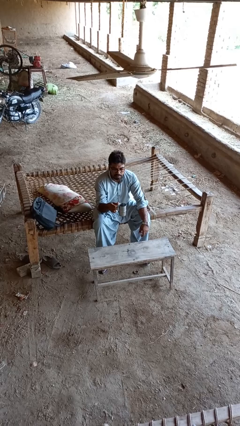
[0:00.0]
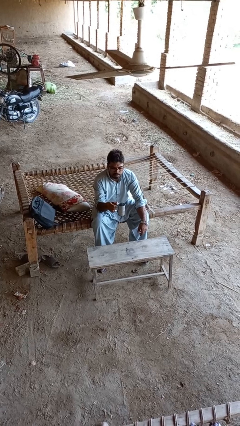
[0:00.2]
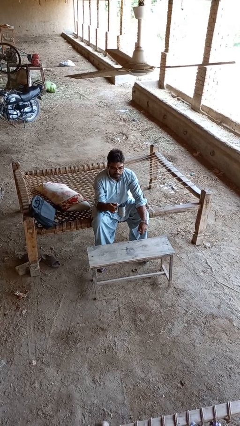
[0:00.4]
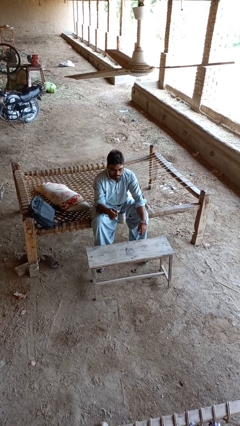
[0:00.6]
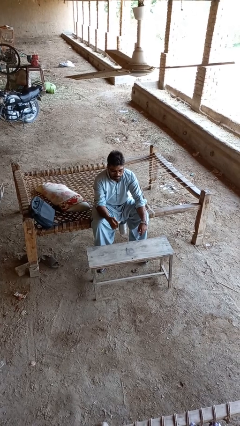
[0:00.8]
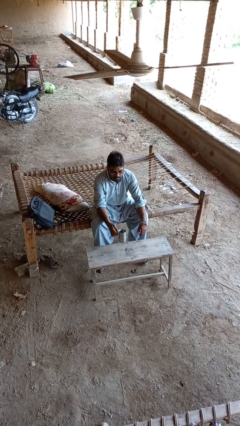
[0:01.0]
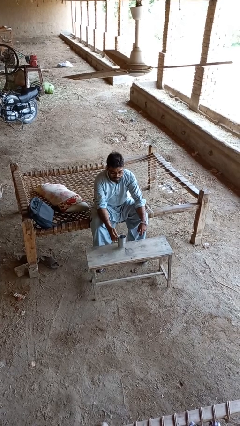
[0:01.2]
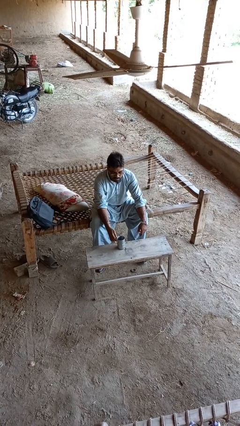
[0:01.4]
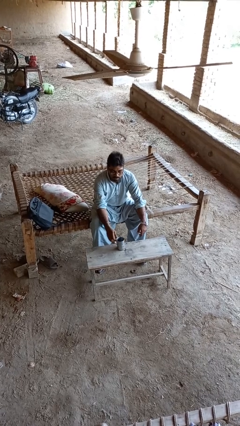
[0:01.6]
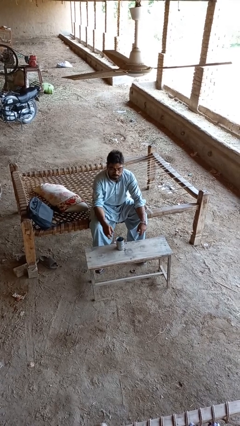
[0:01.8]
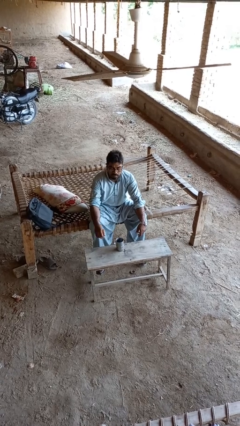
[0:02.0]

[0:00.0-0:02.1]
person puts down object on table

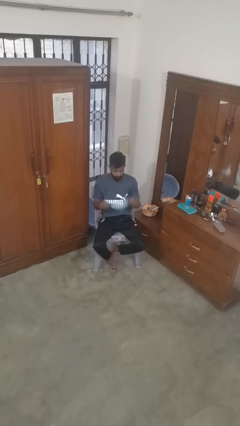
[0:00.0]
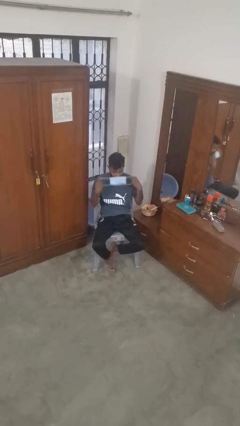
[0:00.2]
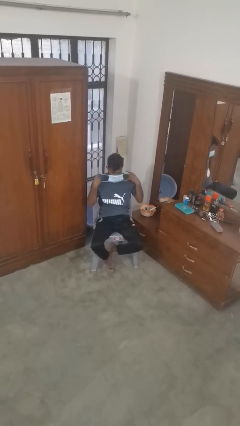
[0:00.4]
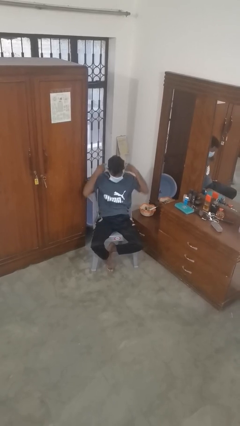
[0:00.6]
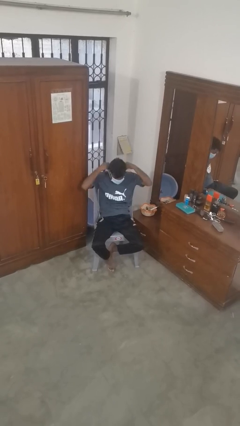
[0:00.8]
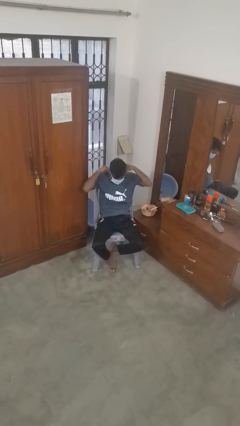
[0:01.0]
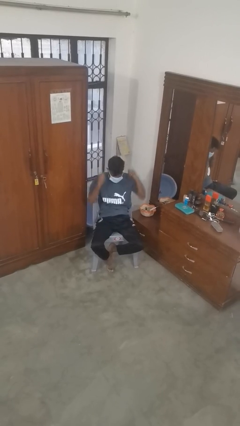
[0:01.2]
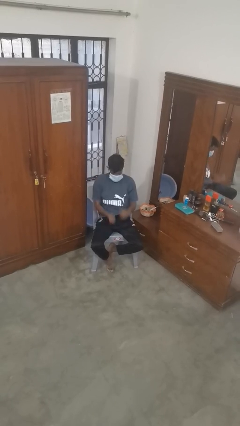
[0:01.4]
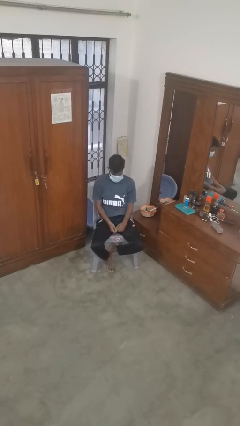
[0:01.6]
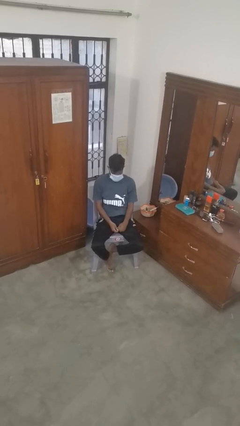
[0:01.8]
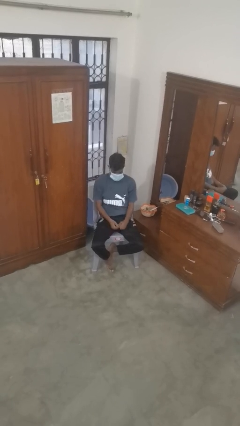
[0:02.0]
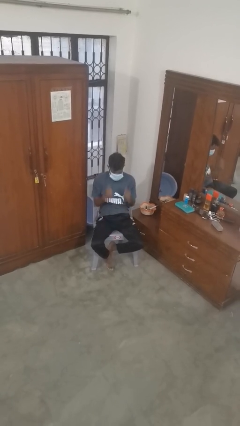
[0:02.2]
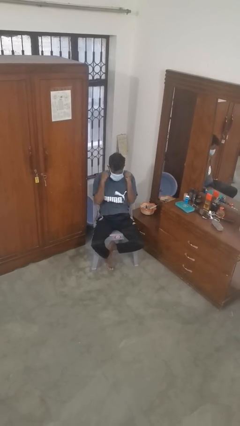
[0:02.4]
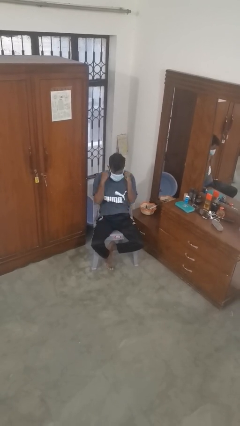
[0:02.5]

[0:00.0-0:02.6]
person puts on facemask

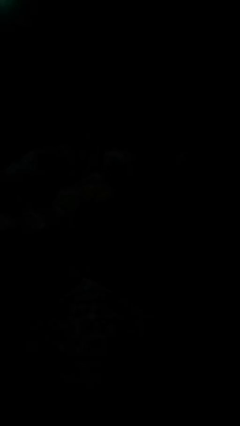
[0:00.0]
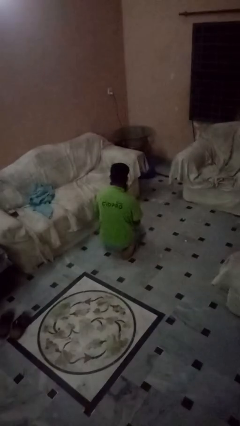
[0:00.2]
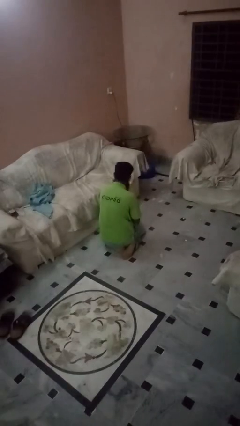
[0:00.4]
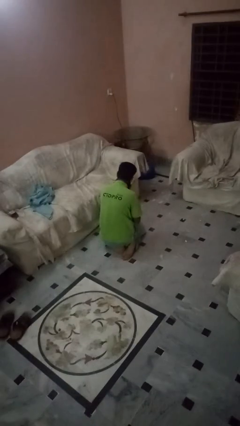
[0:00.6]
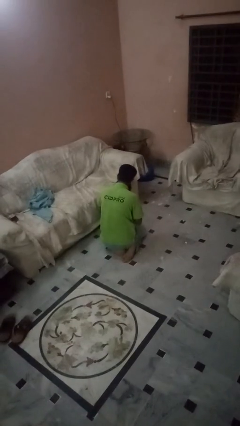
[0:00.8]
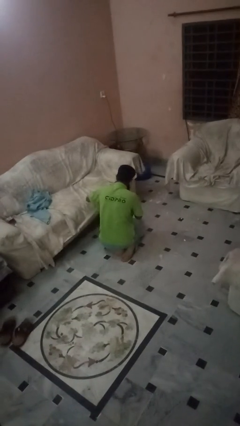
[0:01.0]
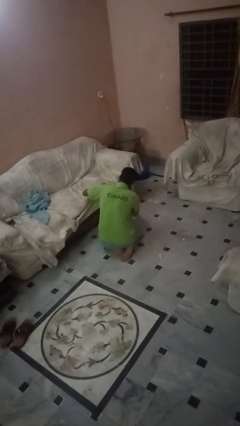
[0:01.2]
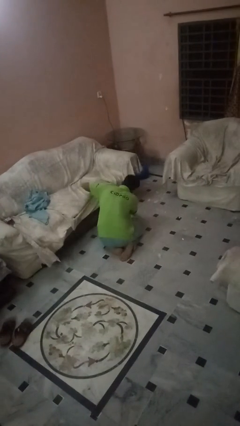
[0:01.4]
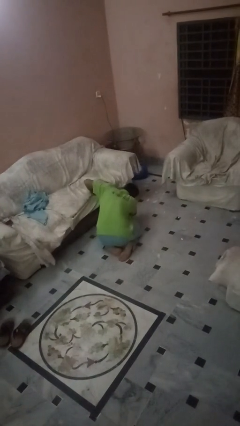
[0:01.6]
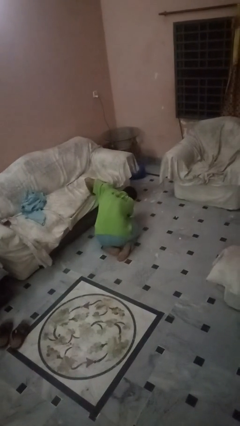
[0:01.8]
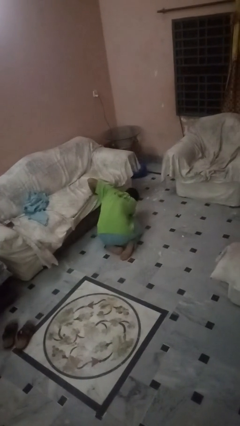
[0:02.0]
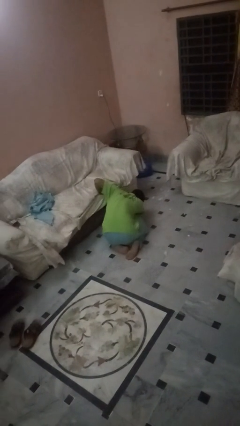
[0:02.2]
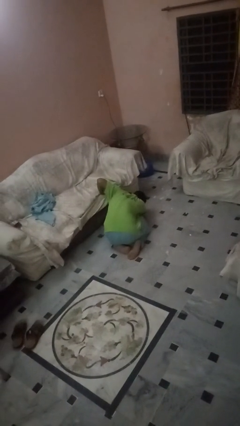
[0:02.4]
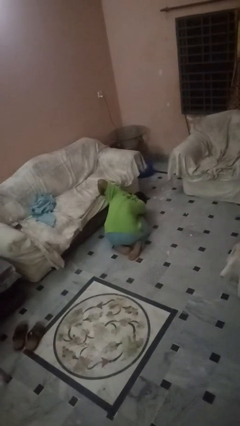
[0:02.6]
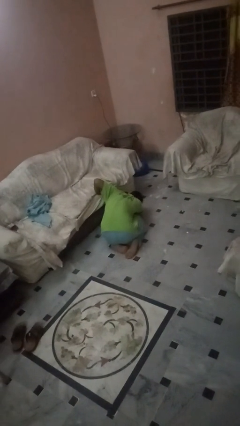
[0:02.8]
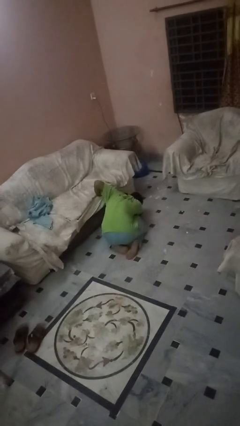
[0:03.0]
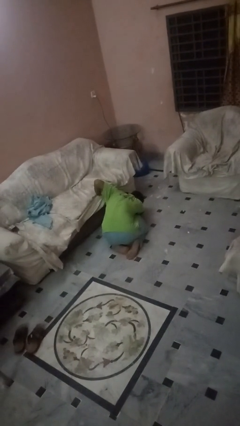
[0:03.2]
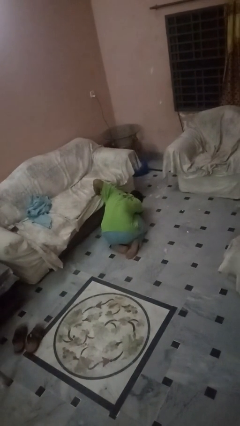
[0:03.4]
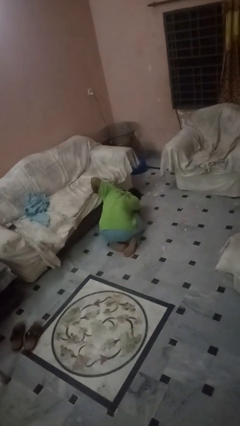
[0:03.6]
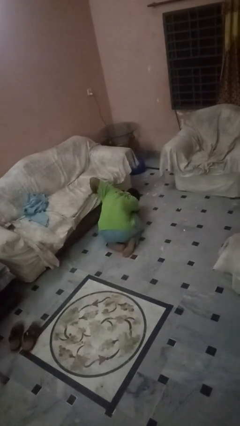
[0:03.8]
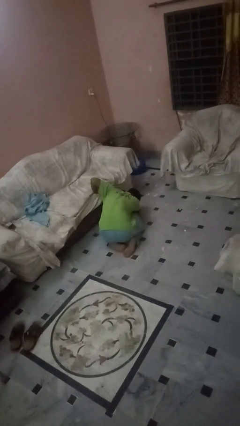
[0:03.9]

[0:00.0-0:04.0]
person searches under couch

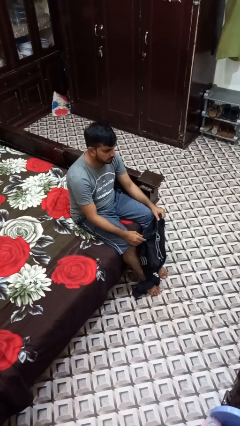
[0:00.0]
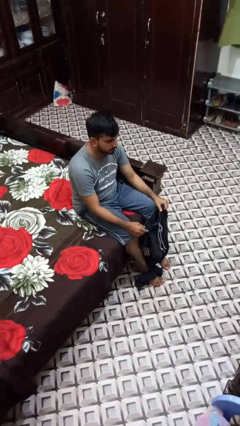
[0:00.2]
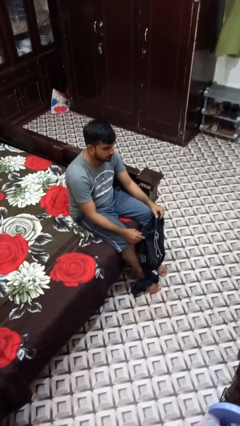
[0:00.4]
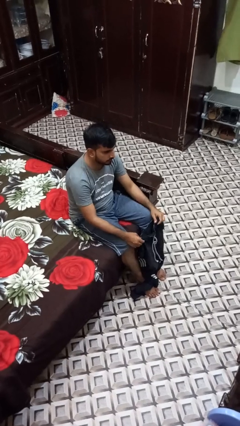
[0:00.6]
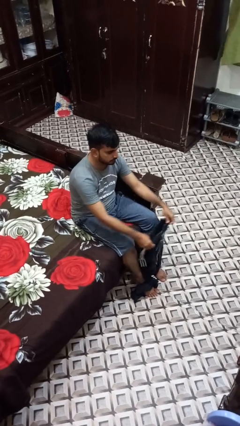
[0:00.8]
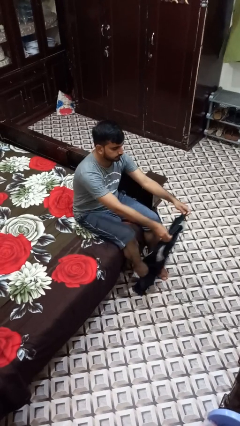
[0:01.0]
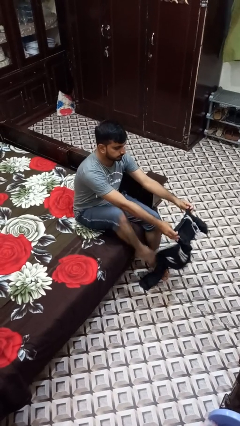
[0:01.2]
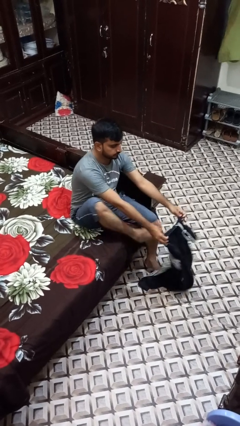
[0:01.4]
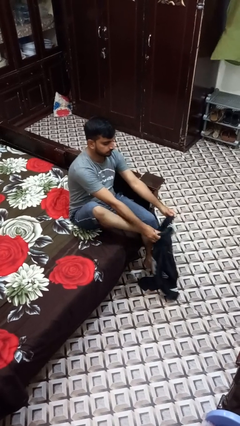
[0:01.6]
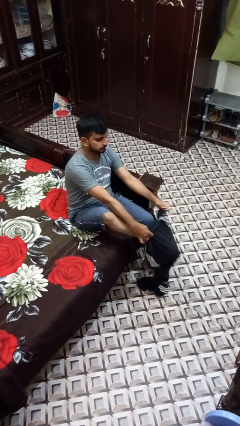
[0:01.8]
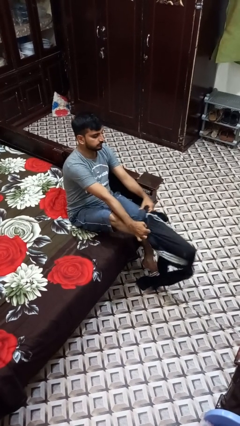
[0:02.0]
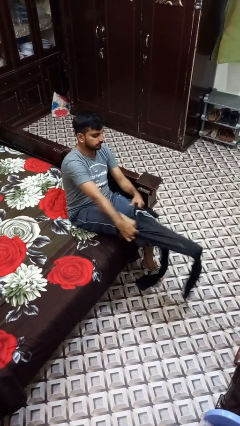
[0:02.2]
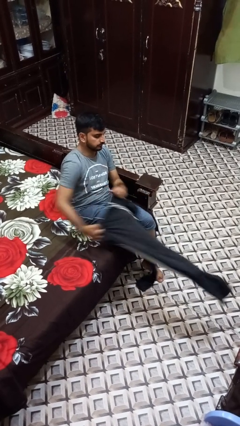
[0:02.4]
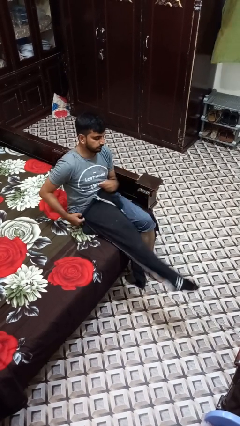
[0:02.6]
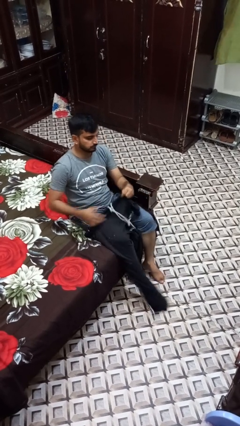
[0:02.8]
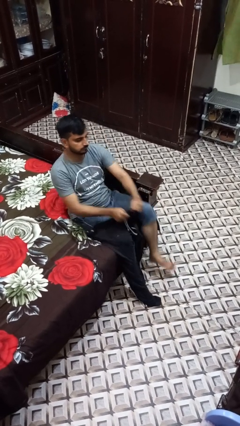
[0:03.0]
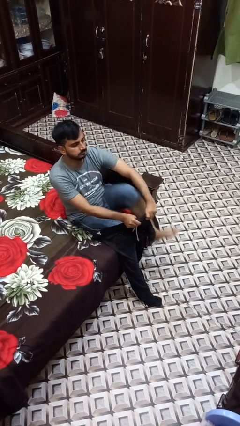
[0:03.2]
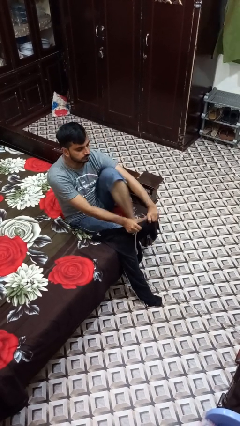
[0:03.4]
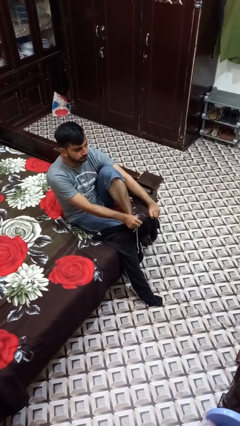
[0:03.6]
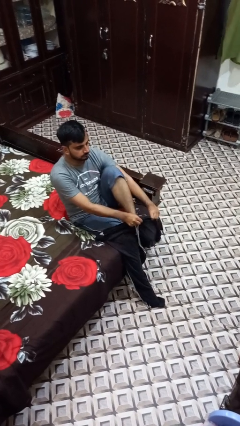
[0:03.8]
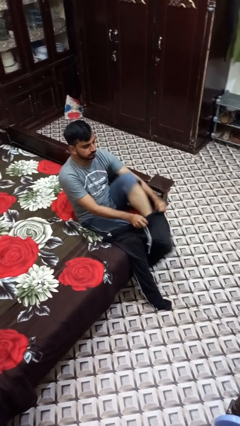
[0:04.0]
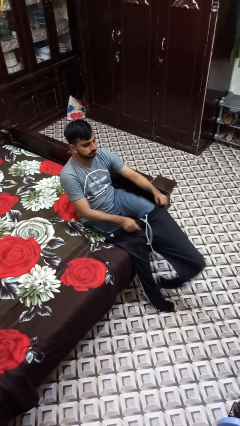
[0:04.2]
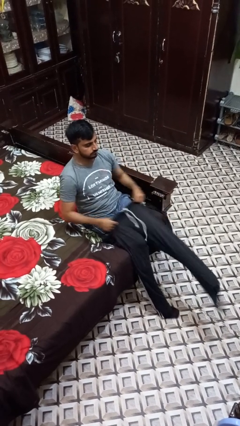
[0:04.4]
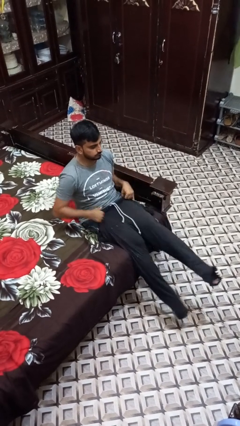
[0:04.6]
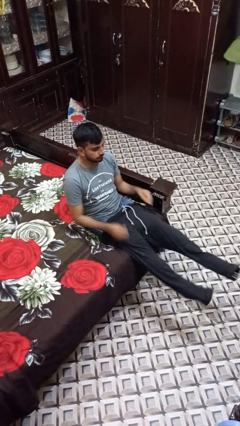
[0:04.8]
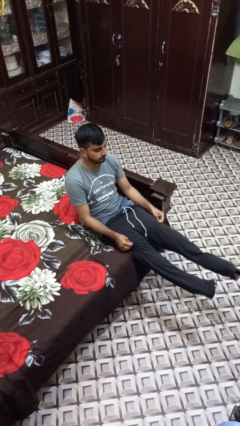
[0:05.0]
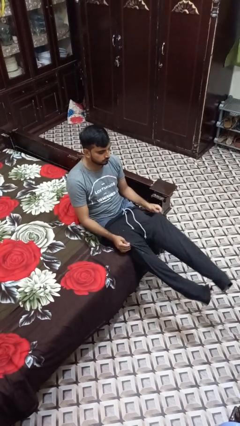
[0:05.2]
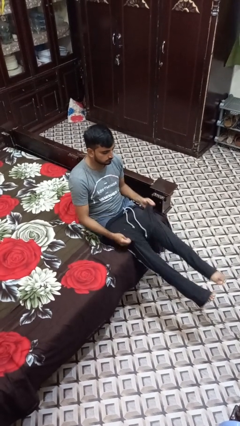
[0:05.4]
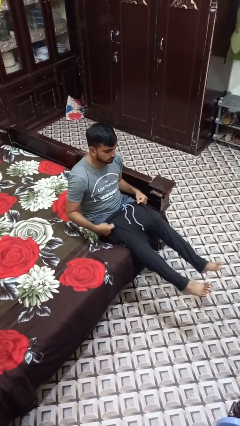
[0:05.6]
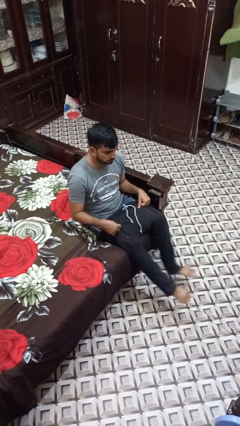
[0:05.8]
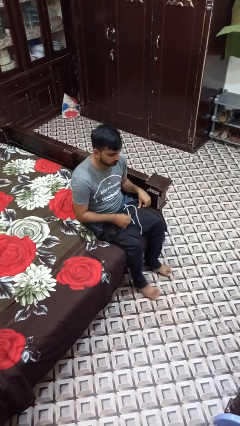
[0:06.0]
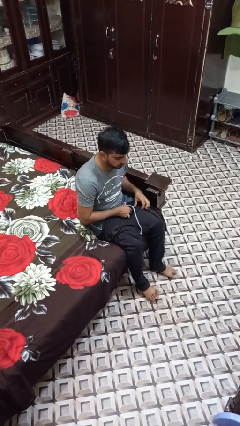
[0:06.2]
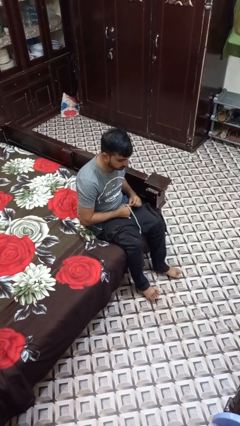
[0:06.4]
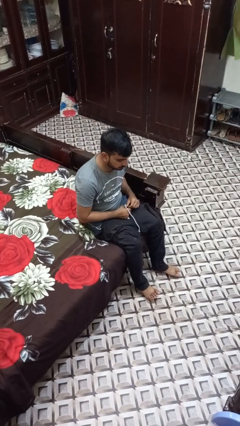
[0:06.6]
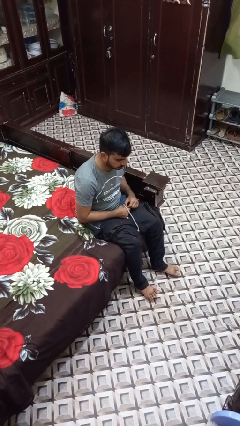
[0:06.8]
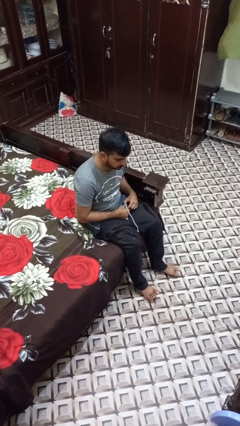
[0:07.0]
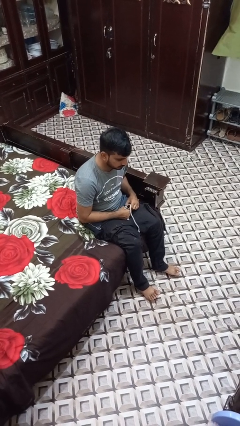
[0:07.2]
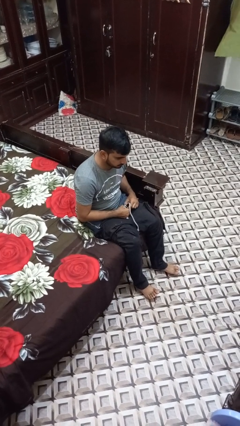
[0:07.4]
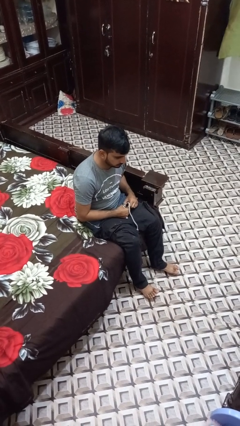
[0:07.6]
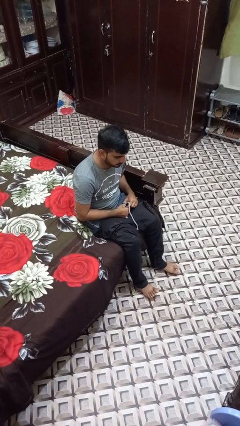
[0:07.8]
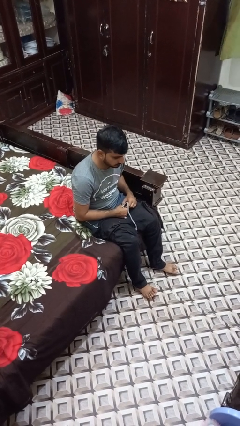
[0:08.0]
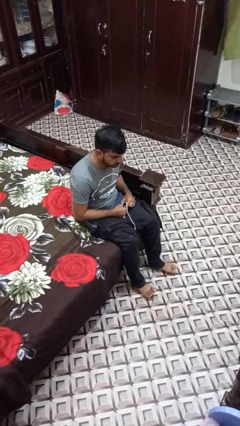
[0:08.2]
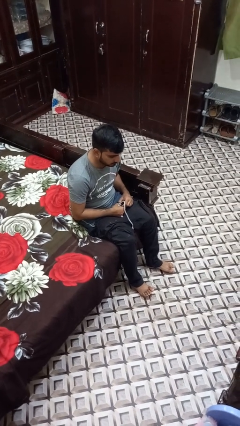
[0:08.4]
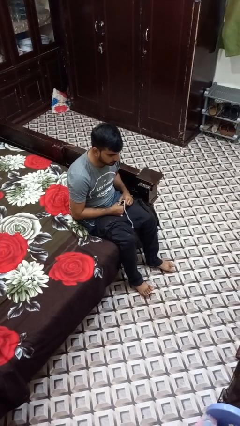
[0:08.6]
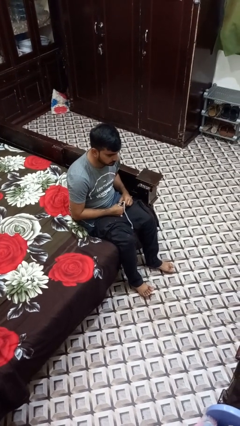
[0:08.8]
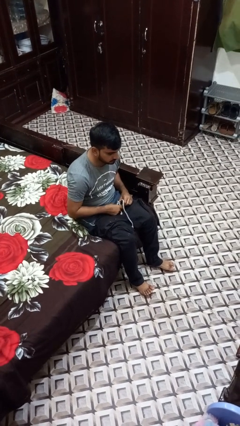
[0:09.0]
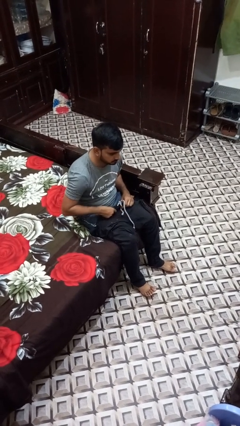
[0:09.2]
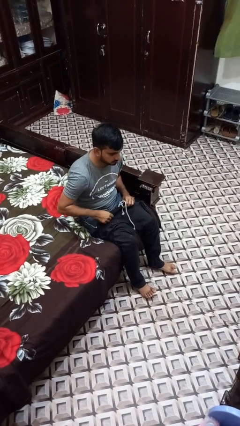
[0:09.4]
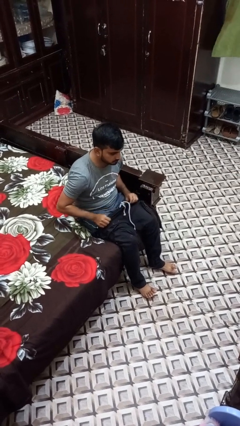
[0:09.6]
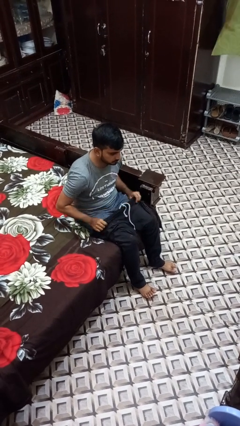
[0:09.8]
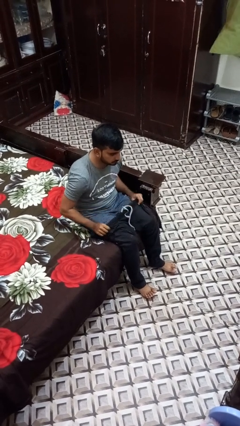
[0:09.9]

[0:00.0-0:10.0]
person puts on pants
